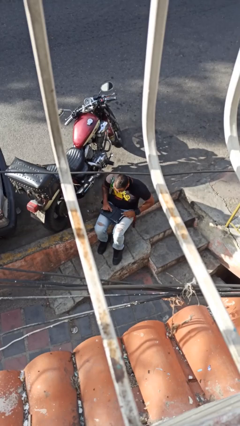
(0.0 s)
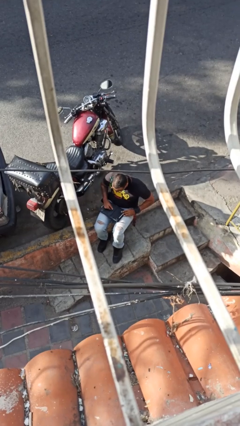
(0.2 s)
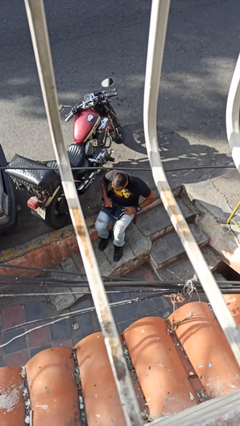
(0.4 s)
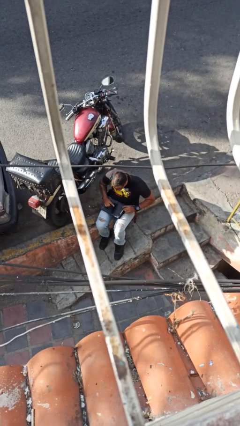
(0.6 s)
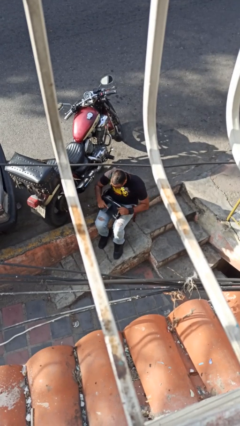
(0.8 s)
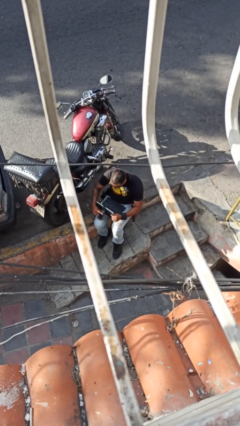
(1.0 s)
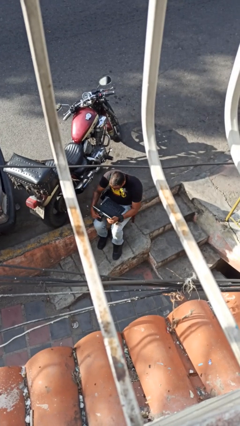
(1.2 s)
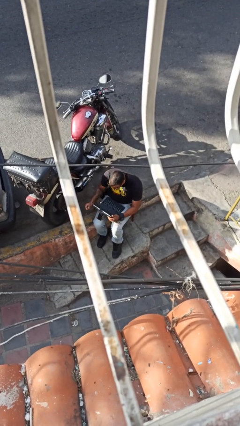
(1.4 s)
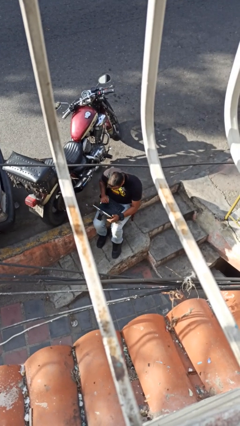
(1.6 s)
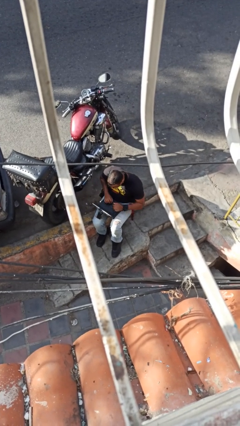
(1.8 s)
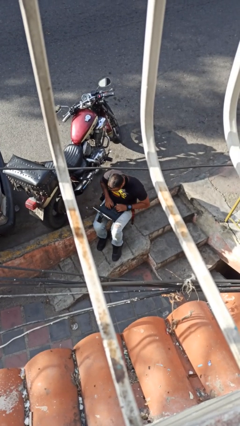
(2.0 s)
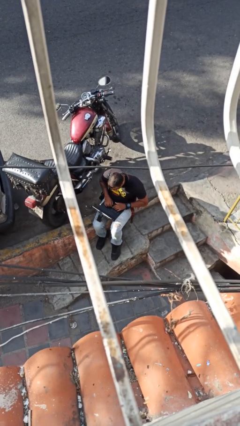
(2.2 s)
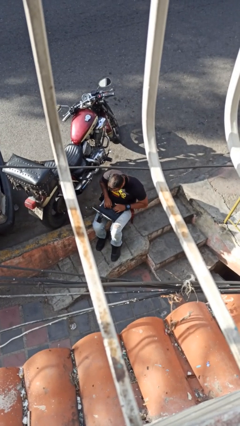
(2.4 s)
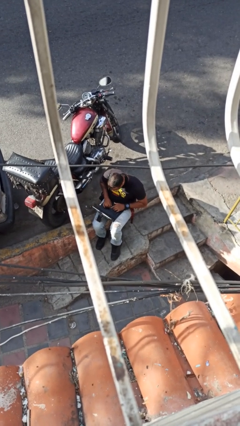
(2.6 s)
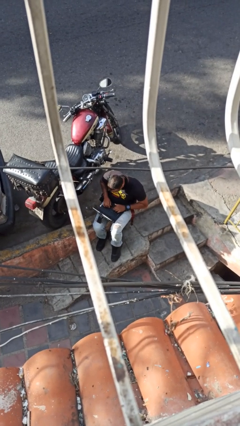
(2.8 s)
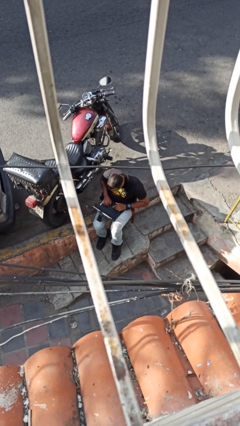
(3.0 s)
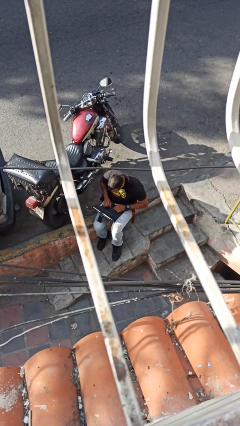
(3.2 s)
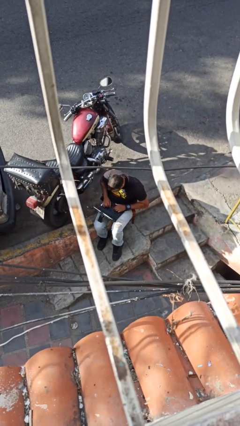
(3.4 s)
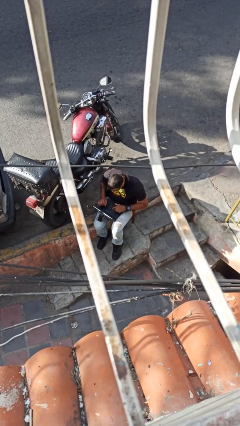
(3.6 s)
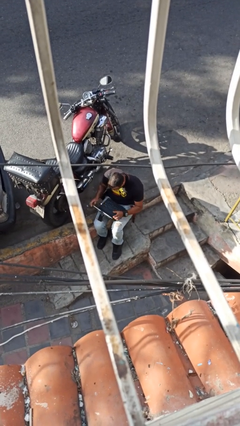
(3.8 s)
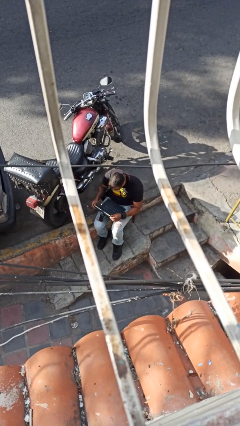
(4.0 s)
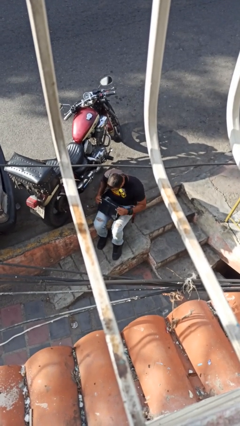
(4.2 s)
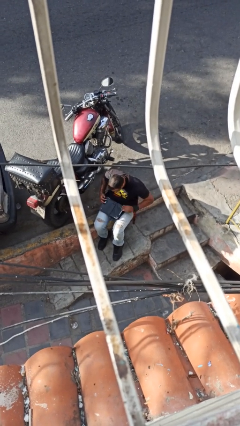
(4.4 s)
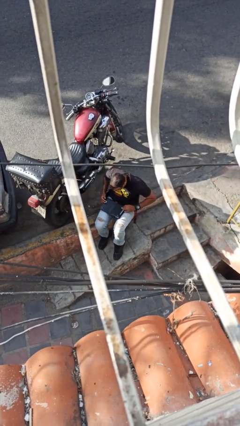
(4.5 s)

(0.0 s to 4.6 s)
person interacts with laptop

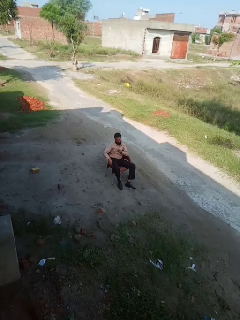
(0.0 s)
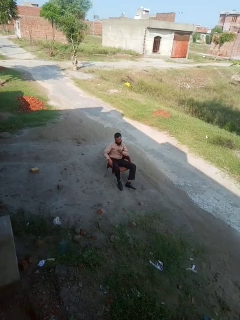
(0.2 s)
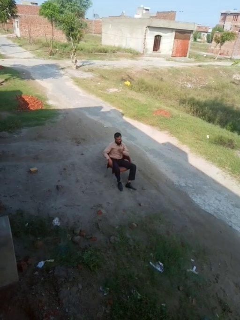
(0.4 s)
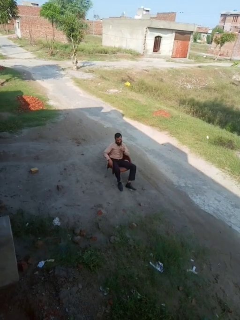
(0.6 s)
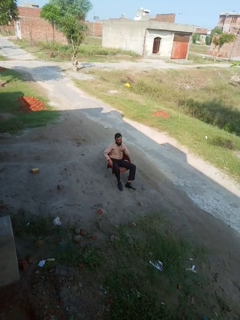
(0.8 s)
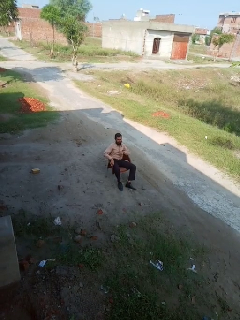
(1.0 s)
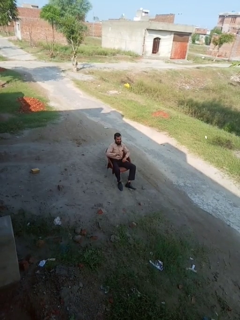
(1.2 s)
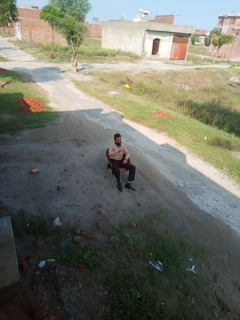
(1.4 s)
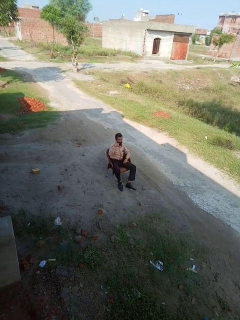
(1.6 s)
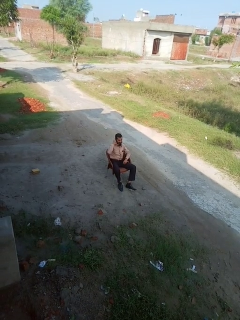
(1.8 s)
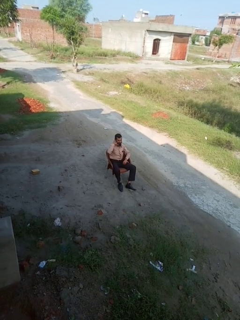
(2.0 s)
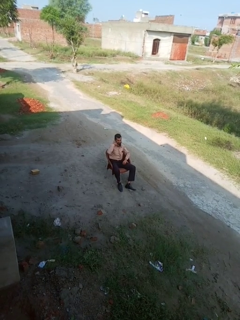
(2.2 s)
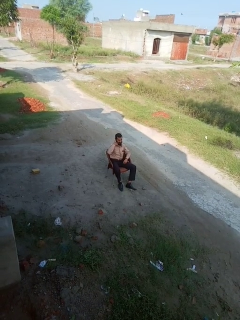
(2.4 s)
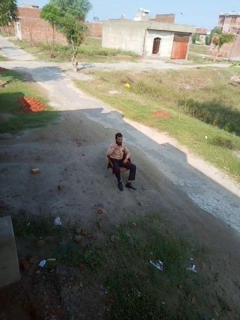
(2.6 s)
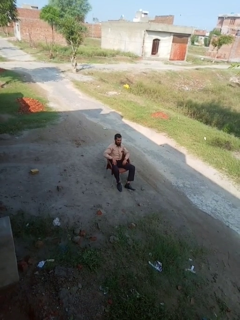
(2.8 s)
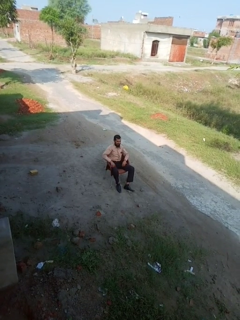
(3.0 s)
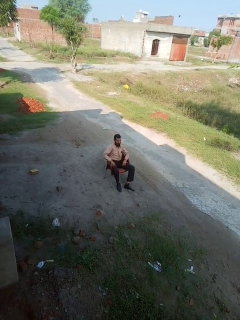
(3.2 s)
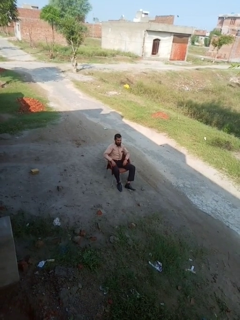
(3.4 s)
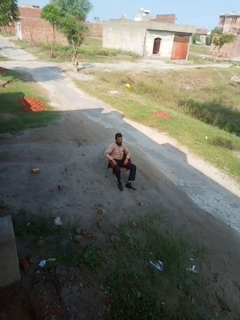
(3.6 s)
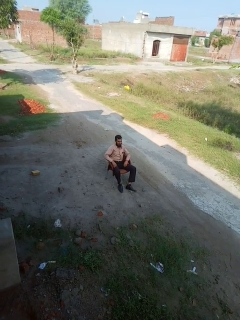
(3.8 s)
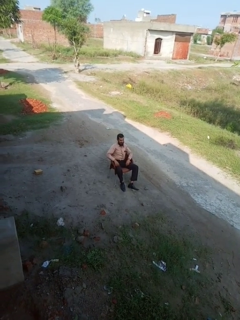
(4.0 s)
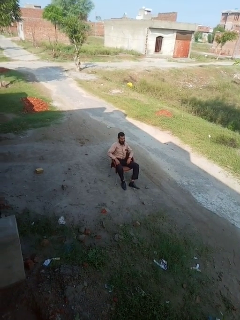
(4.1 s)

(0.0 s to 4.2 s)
person gestures call me

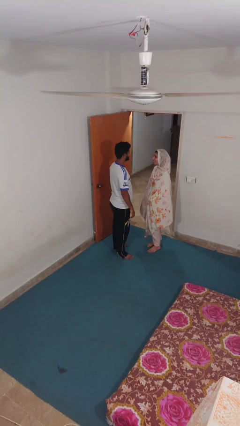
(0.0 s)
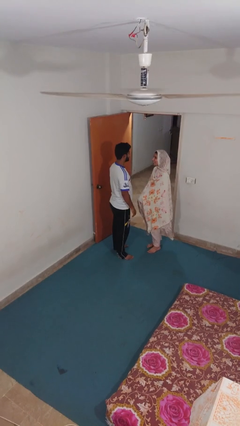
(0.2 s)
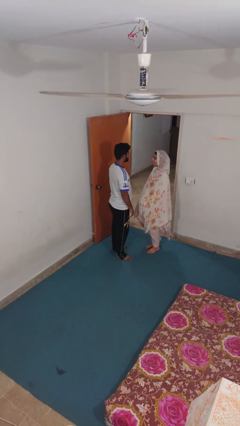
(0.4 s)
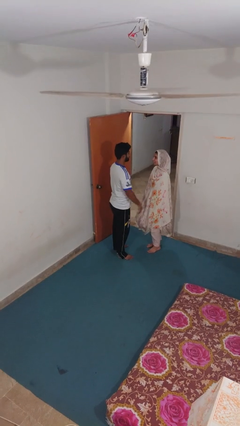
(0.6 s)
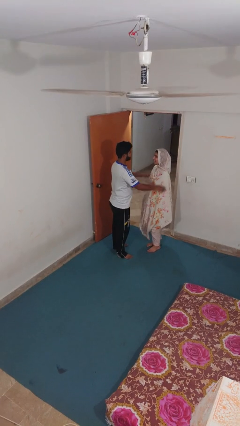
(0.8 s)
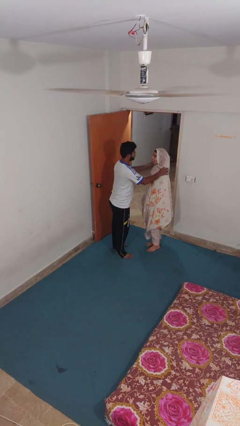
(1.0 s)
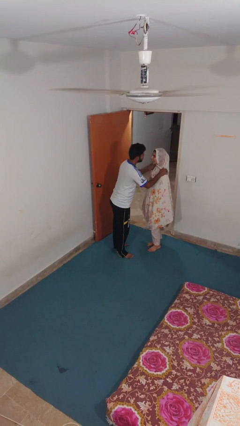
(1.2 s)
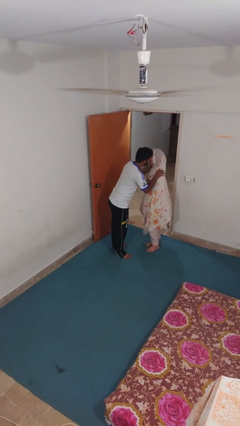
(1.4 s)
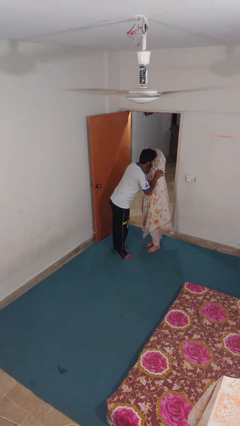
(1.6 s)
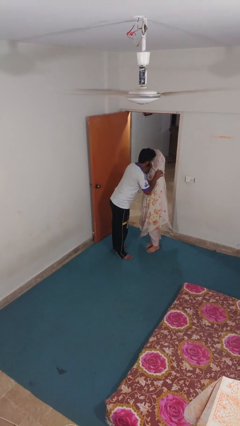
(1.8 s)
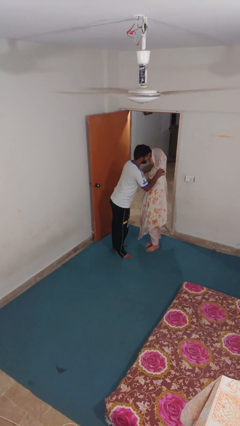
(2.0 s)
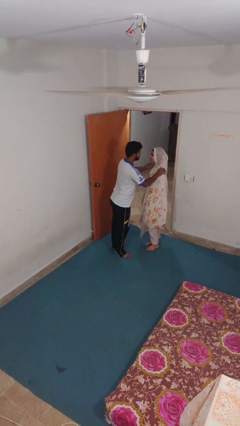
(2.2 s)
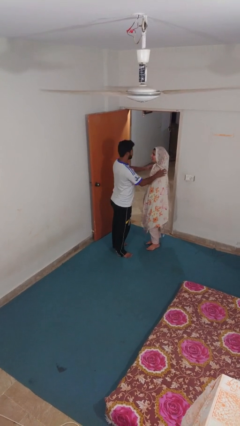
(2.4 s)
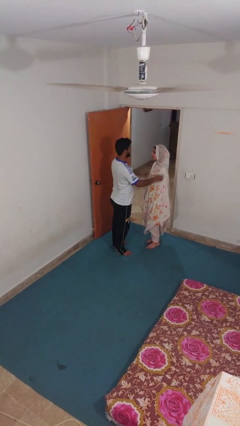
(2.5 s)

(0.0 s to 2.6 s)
person kisses cheek of person

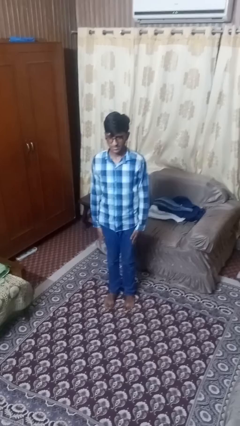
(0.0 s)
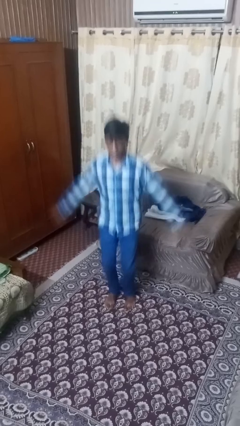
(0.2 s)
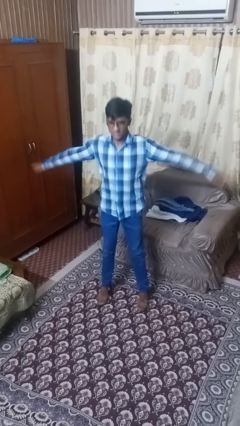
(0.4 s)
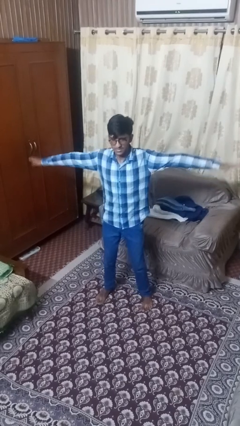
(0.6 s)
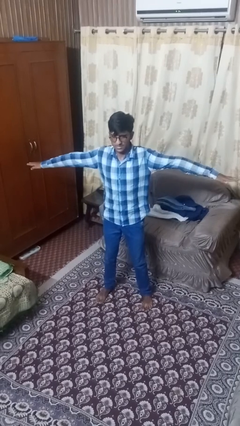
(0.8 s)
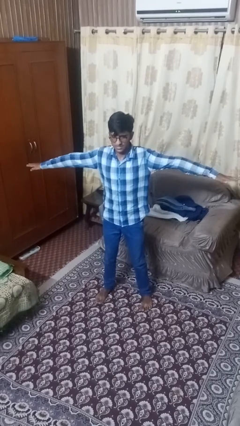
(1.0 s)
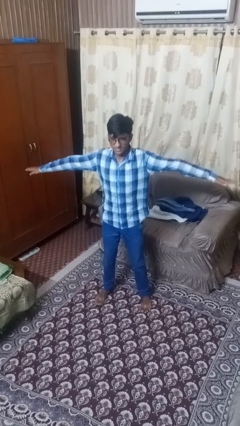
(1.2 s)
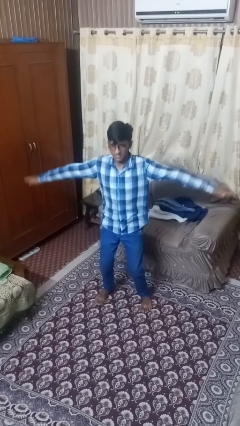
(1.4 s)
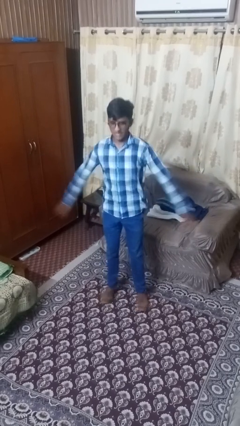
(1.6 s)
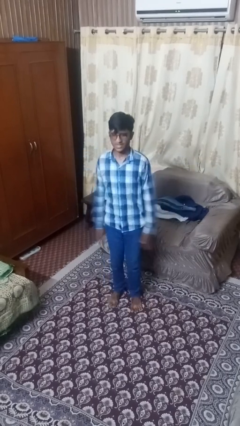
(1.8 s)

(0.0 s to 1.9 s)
person exercises with jumping jacks

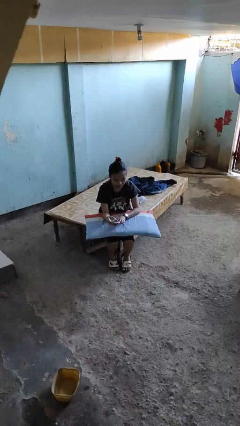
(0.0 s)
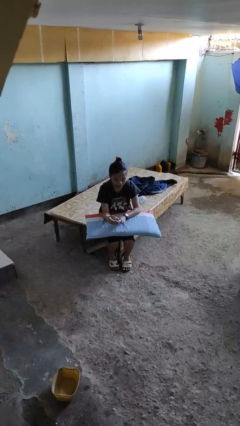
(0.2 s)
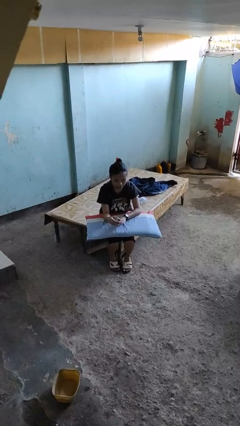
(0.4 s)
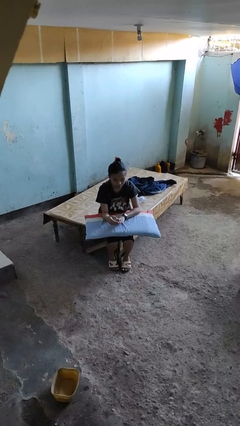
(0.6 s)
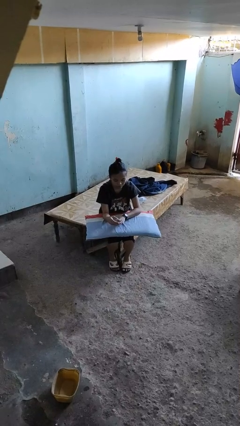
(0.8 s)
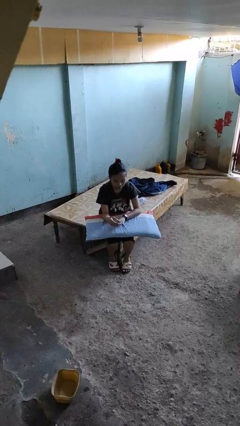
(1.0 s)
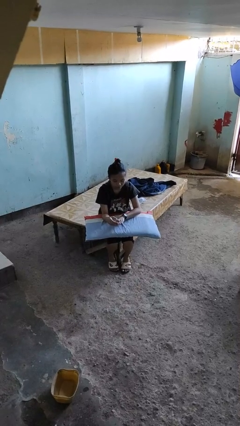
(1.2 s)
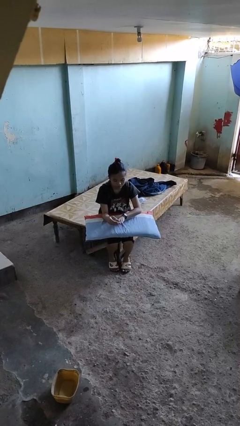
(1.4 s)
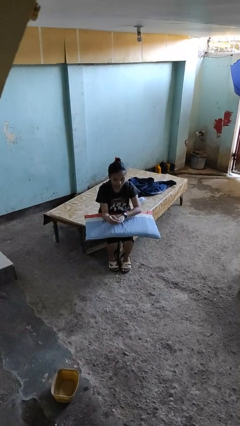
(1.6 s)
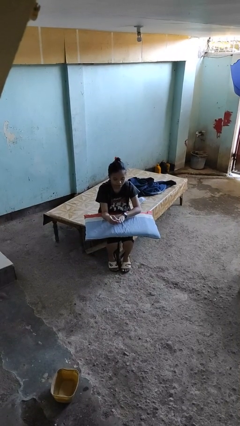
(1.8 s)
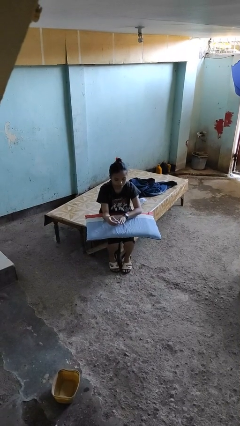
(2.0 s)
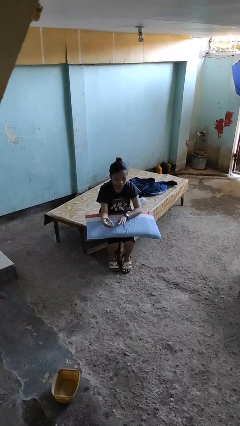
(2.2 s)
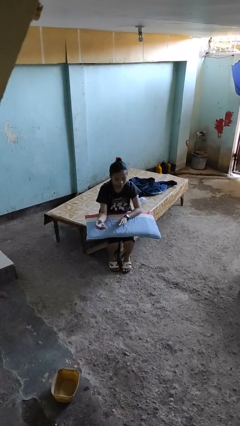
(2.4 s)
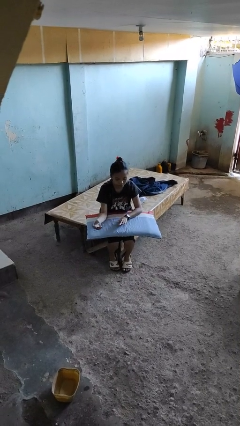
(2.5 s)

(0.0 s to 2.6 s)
person clips fingernails

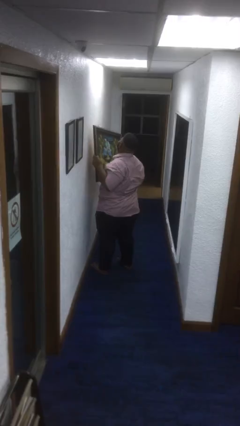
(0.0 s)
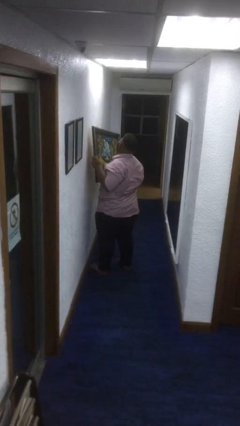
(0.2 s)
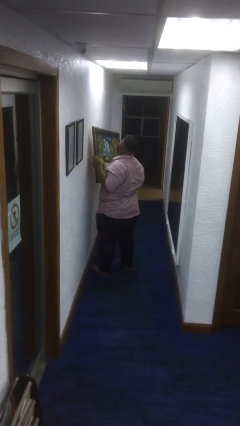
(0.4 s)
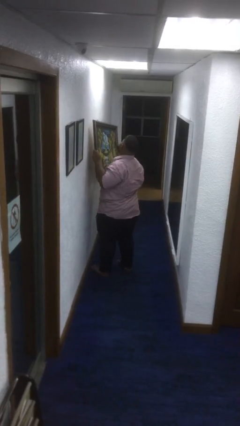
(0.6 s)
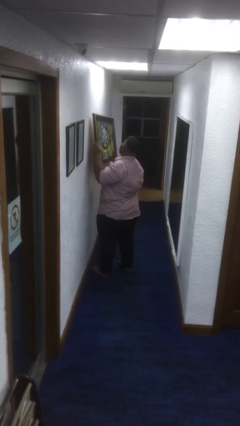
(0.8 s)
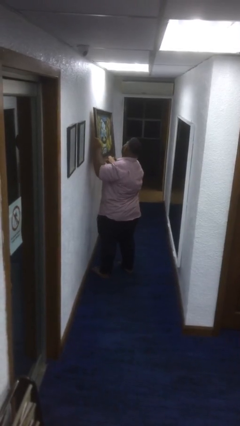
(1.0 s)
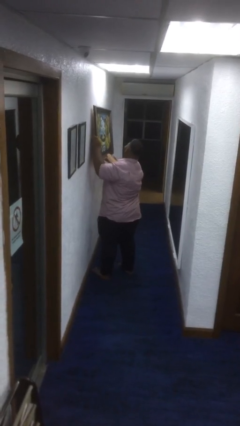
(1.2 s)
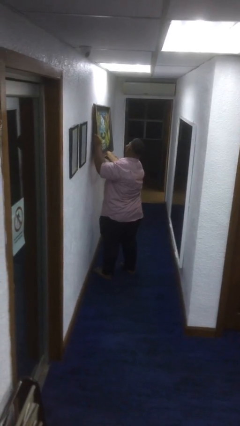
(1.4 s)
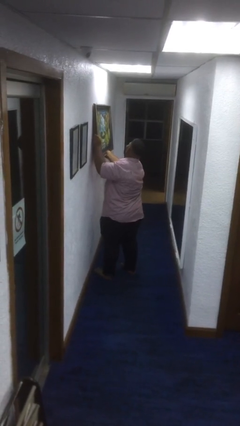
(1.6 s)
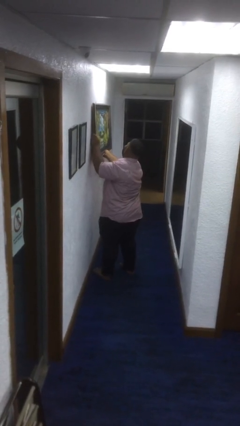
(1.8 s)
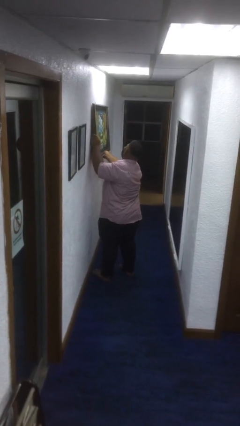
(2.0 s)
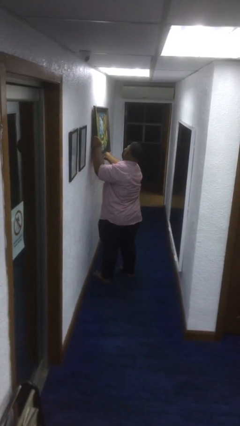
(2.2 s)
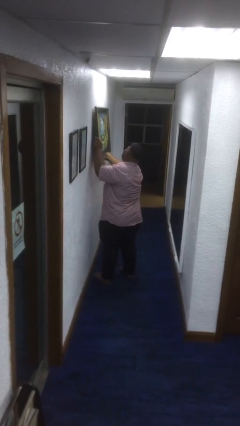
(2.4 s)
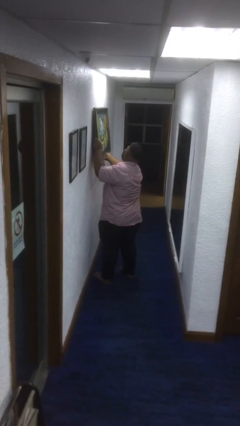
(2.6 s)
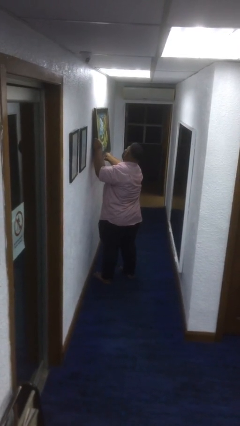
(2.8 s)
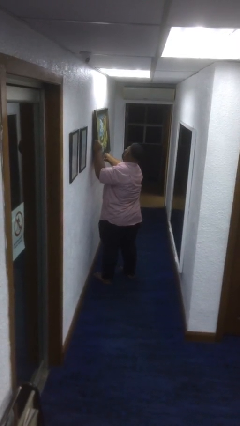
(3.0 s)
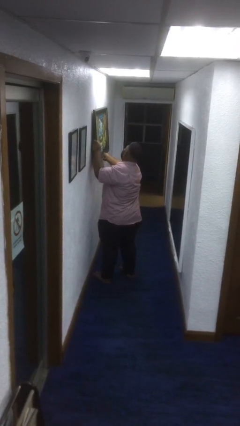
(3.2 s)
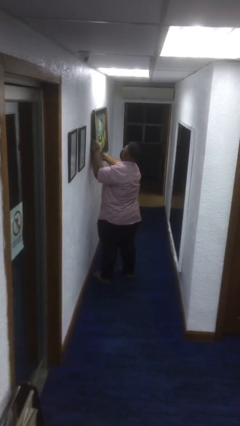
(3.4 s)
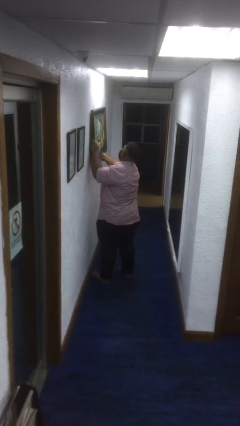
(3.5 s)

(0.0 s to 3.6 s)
person puts up picture frame
